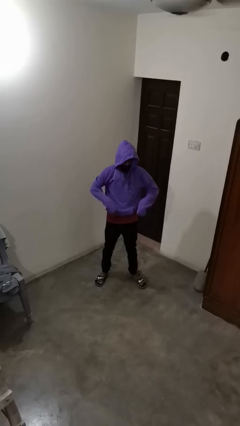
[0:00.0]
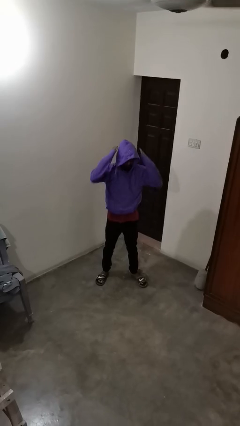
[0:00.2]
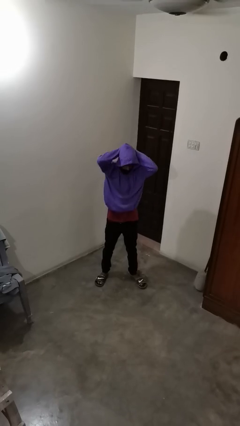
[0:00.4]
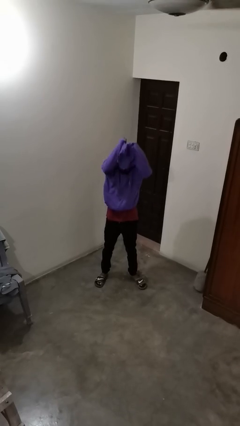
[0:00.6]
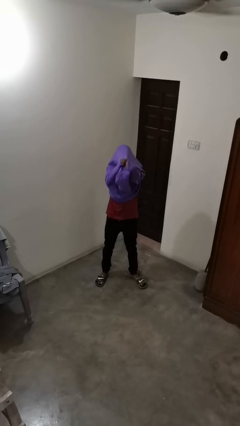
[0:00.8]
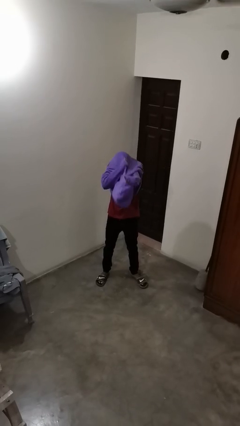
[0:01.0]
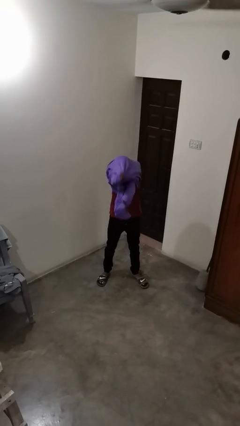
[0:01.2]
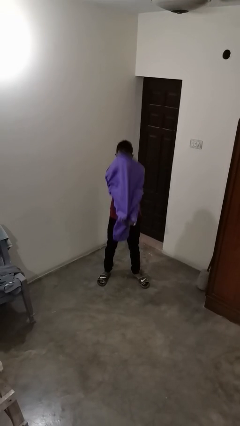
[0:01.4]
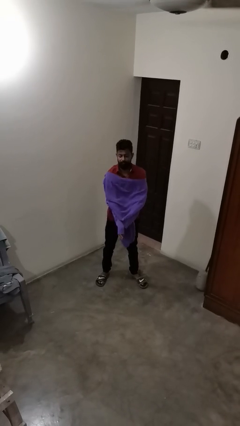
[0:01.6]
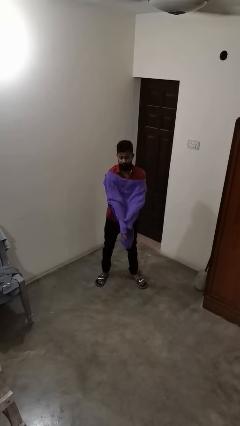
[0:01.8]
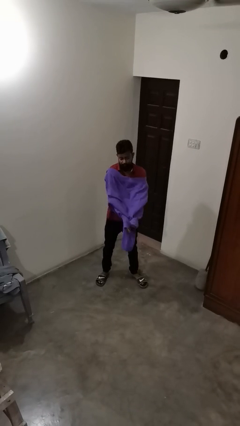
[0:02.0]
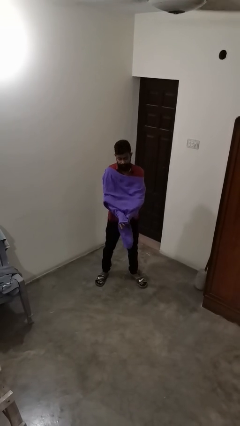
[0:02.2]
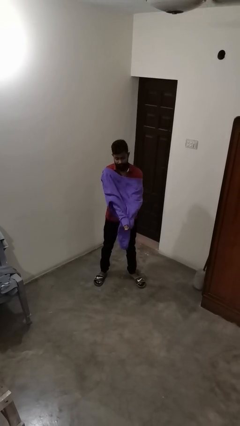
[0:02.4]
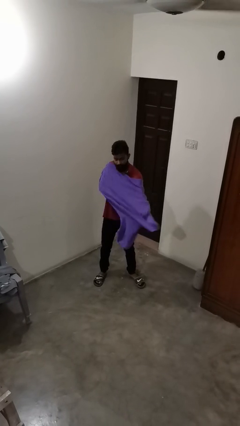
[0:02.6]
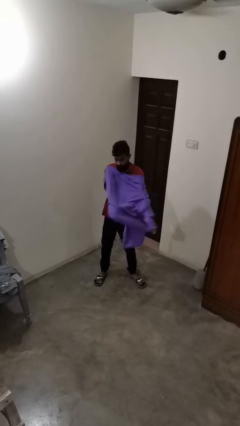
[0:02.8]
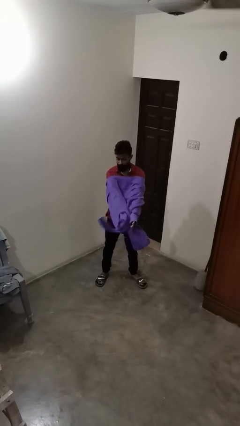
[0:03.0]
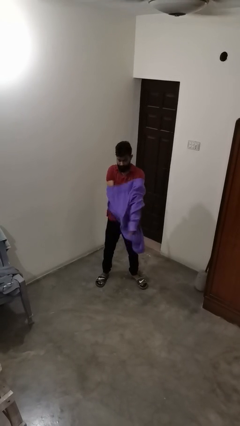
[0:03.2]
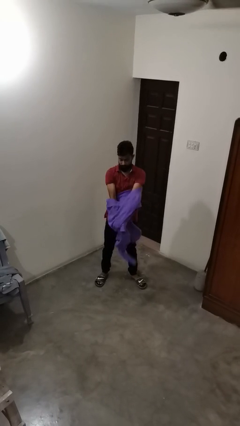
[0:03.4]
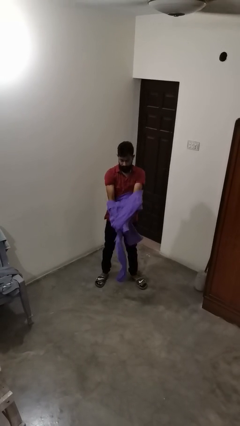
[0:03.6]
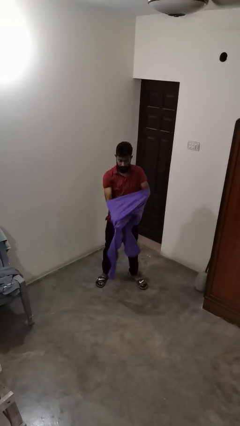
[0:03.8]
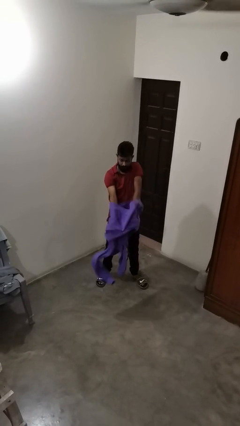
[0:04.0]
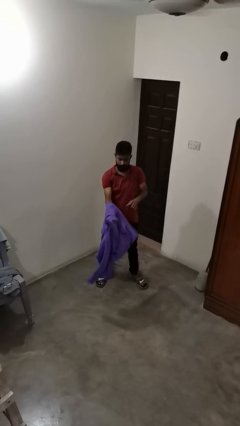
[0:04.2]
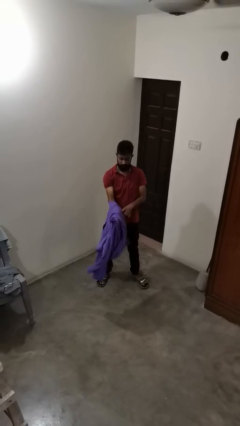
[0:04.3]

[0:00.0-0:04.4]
person takes off hoodie

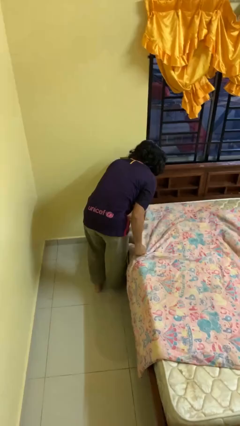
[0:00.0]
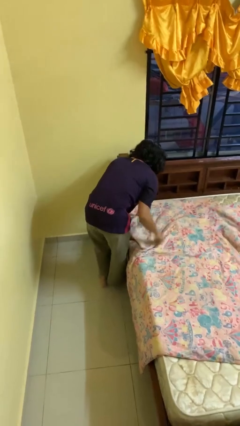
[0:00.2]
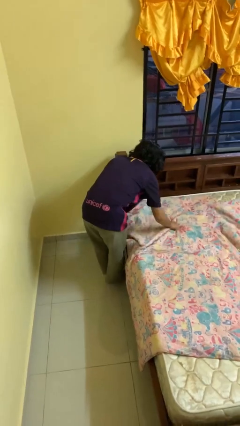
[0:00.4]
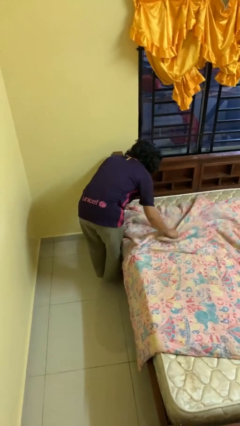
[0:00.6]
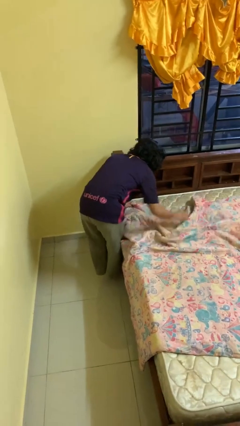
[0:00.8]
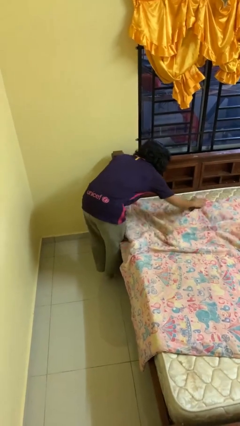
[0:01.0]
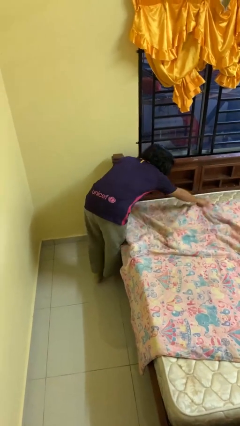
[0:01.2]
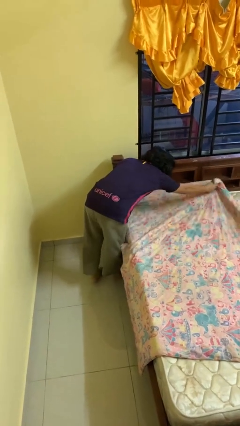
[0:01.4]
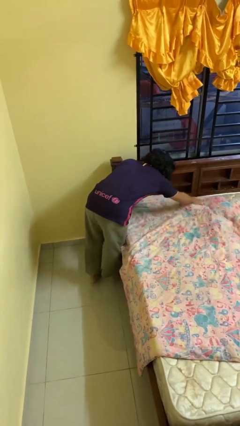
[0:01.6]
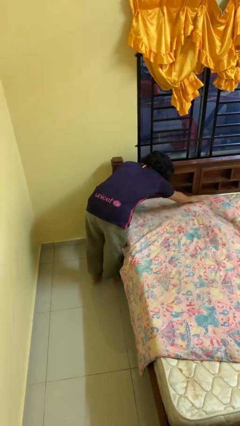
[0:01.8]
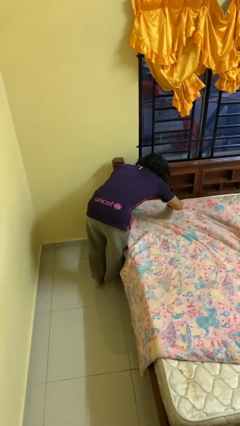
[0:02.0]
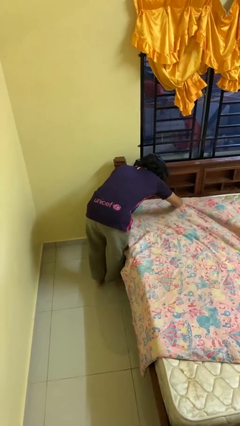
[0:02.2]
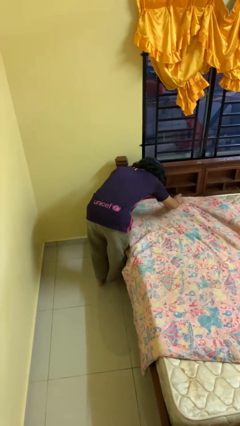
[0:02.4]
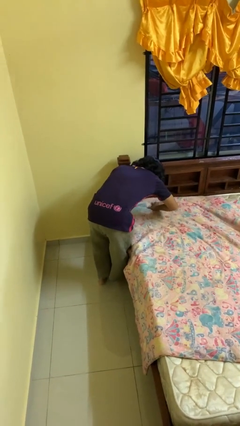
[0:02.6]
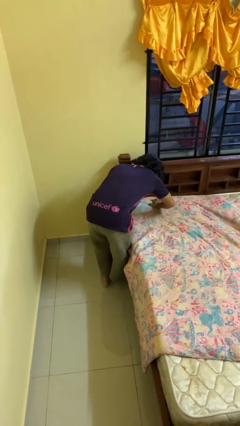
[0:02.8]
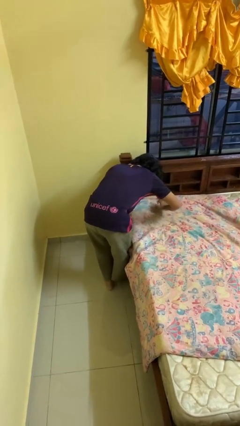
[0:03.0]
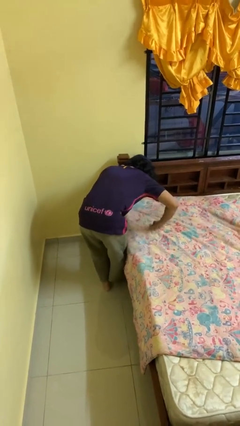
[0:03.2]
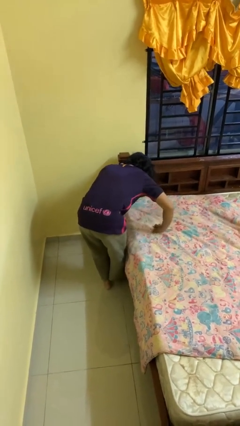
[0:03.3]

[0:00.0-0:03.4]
person makes bed

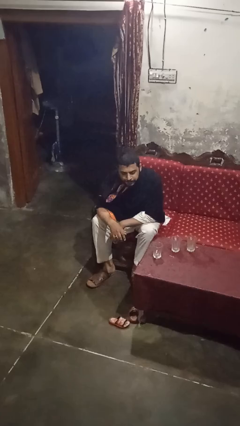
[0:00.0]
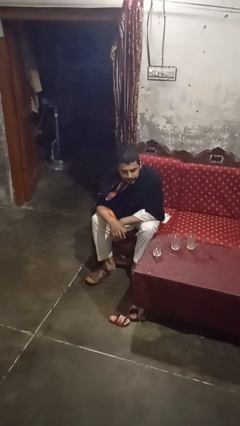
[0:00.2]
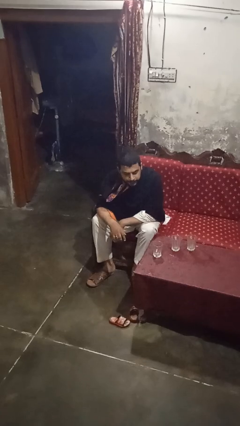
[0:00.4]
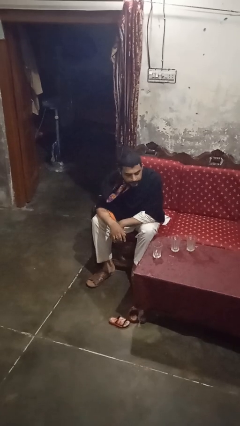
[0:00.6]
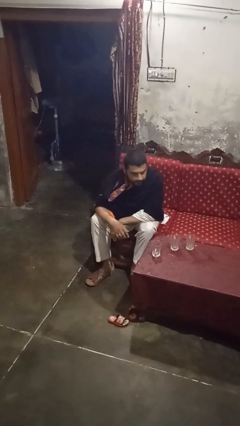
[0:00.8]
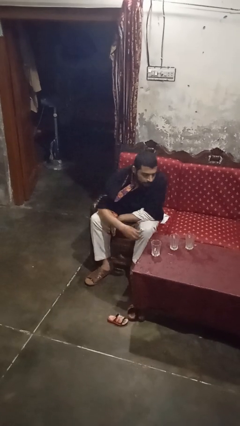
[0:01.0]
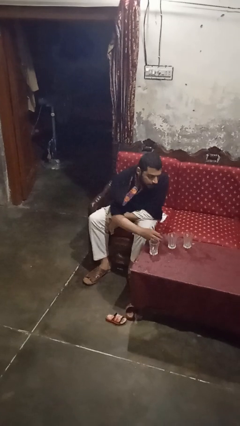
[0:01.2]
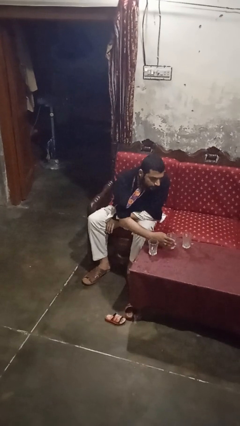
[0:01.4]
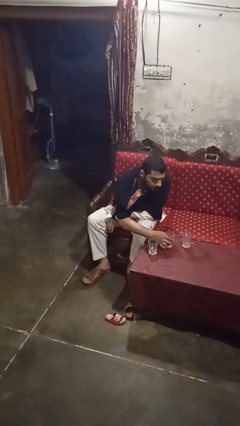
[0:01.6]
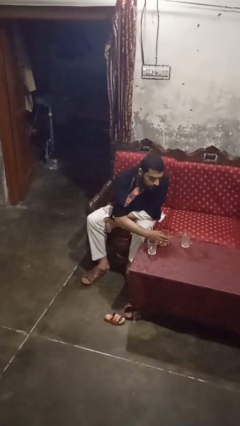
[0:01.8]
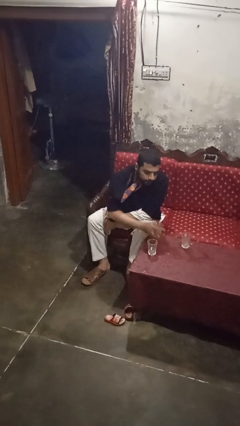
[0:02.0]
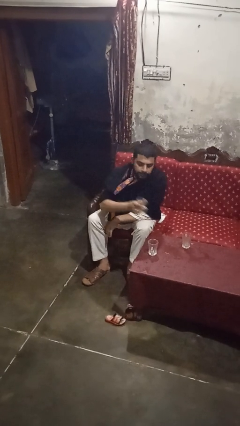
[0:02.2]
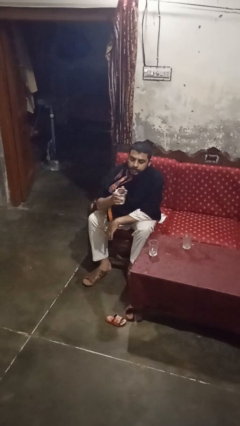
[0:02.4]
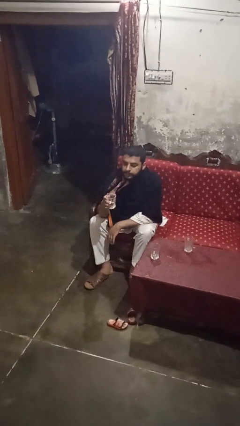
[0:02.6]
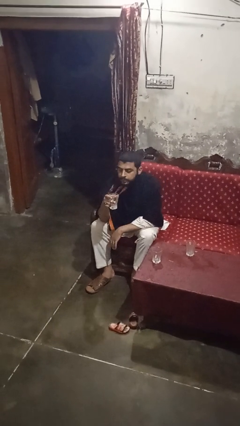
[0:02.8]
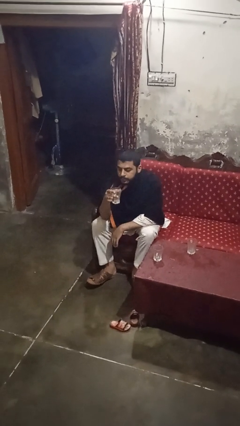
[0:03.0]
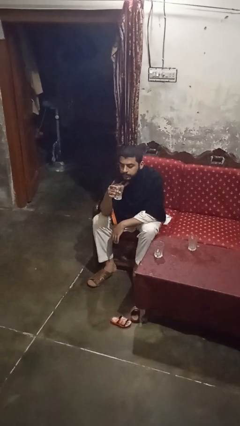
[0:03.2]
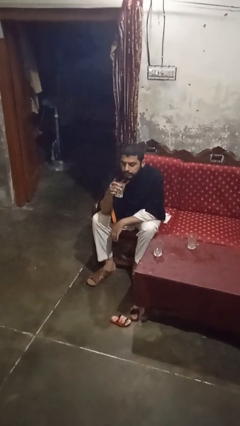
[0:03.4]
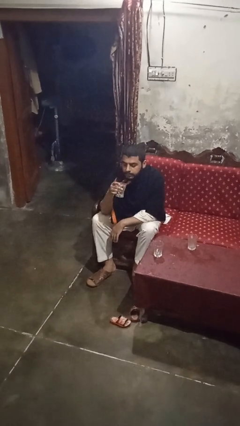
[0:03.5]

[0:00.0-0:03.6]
person picks up object from table

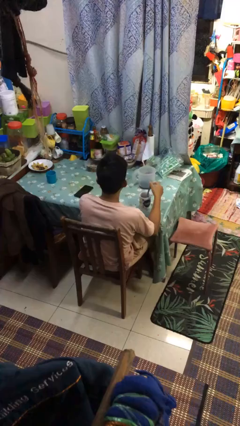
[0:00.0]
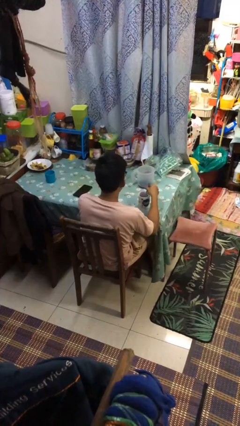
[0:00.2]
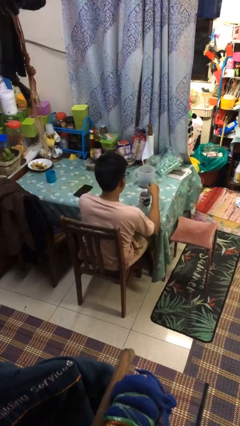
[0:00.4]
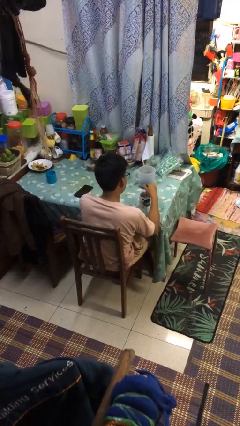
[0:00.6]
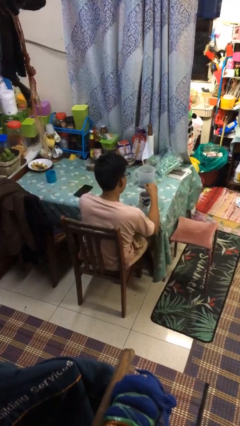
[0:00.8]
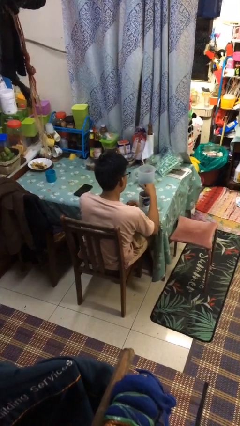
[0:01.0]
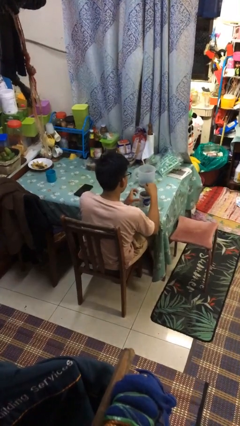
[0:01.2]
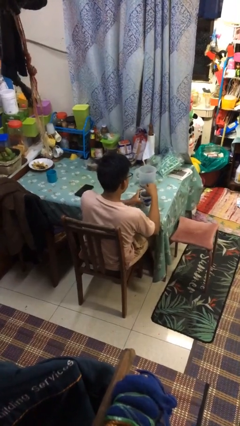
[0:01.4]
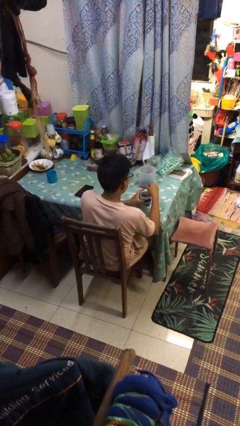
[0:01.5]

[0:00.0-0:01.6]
person stirs mug

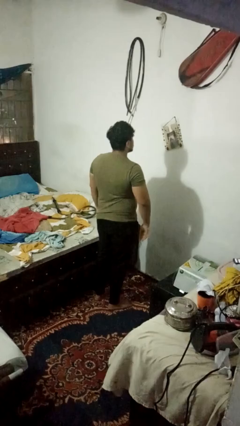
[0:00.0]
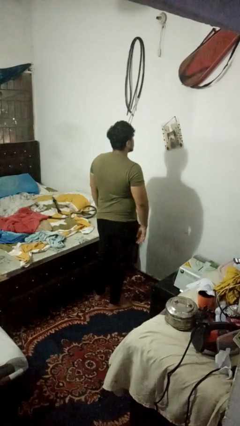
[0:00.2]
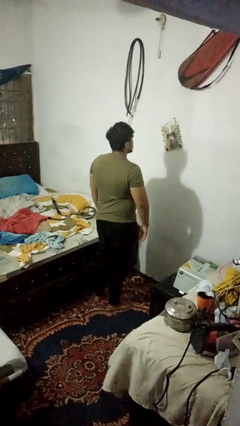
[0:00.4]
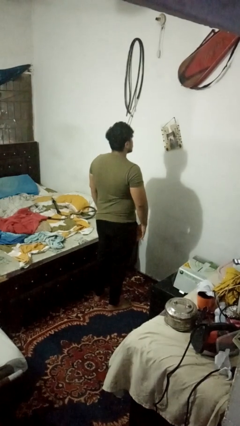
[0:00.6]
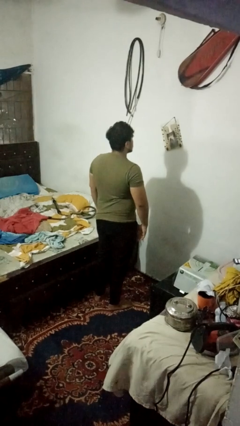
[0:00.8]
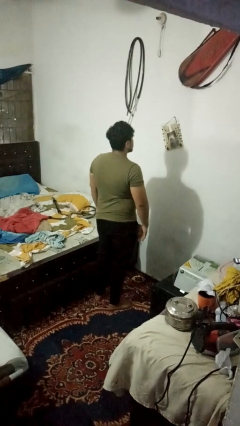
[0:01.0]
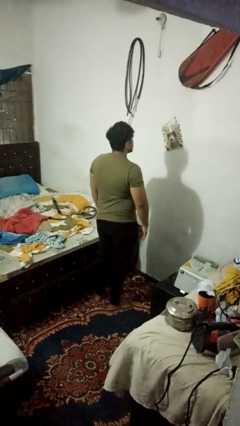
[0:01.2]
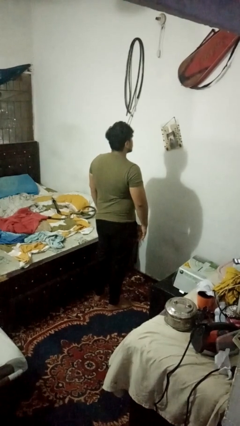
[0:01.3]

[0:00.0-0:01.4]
person gestures blow kiss

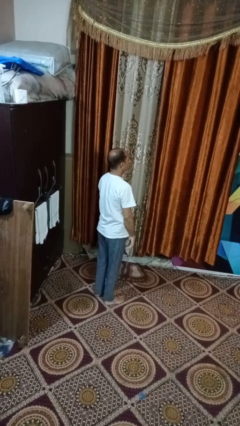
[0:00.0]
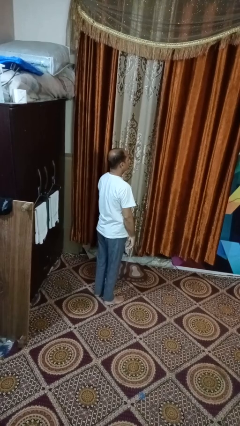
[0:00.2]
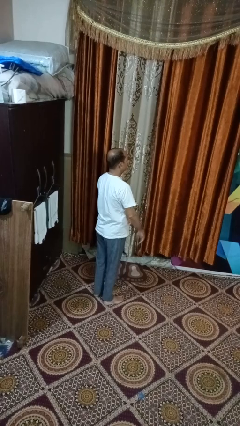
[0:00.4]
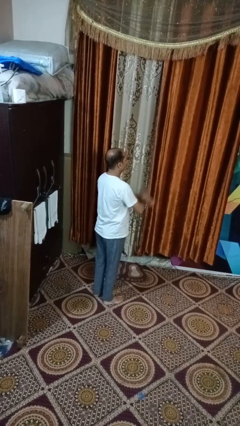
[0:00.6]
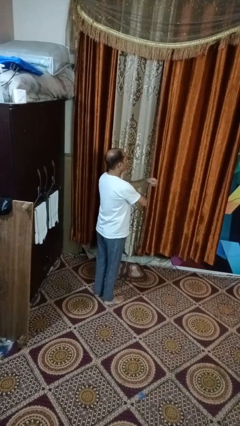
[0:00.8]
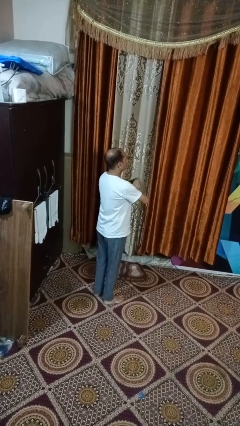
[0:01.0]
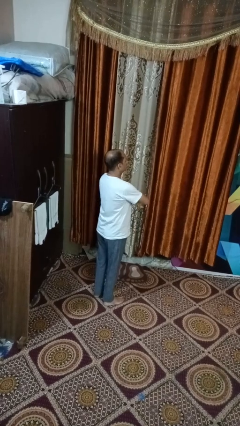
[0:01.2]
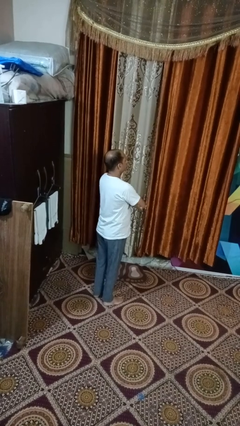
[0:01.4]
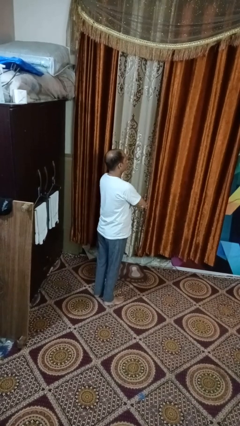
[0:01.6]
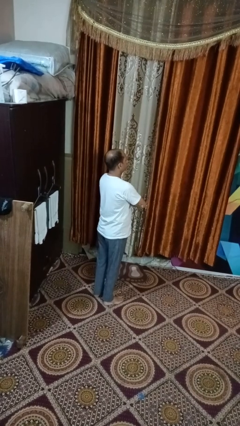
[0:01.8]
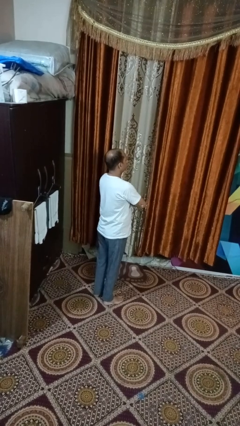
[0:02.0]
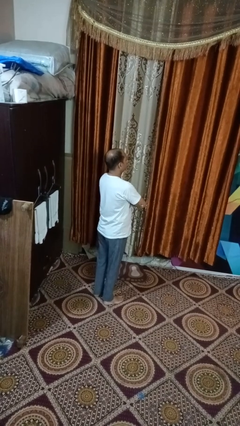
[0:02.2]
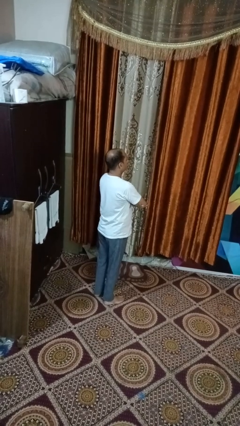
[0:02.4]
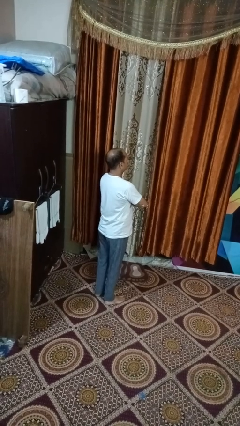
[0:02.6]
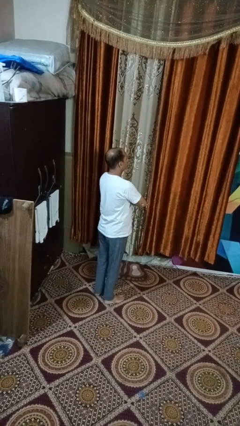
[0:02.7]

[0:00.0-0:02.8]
person crosses arms

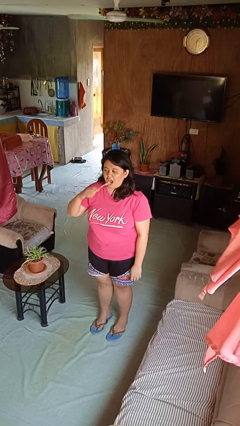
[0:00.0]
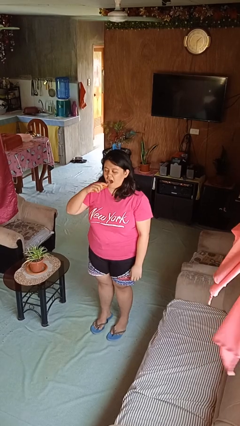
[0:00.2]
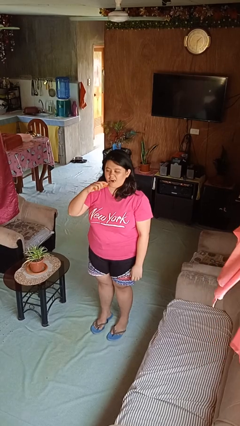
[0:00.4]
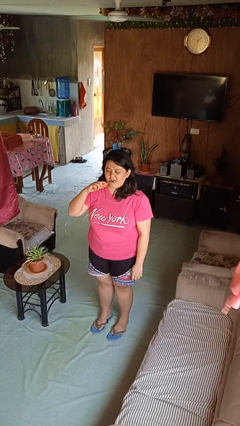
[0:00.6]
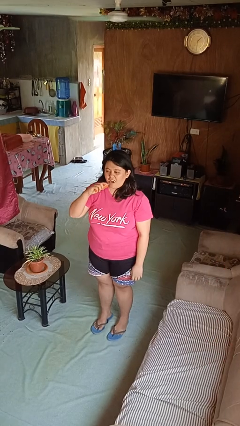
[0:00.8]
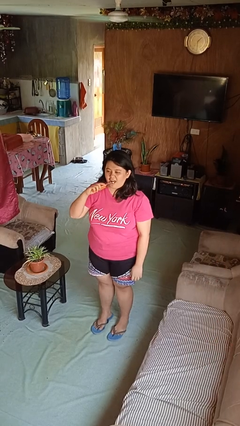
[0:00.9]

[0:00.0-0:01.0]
person brushes teeth
